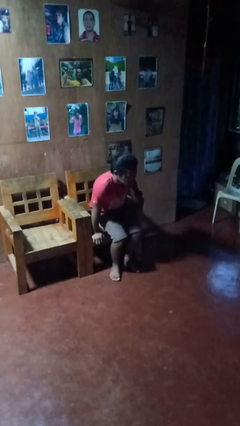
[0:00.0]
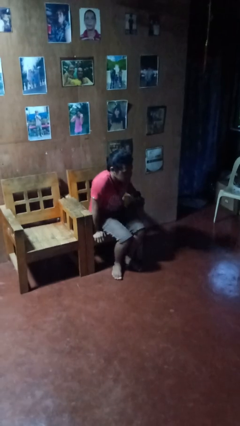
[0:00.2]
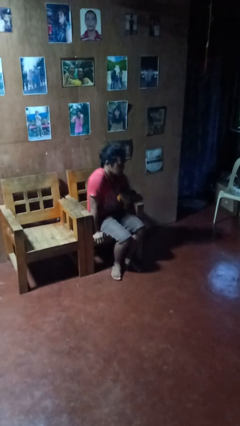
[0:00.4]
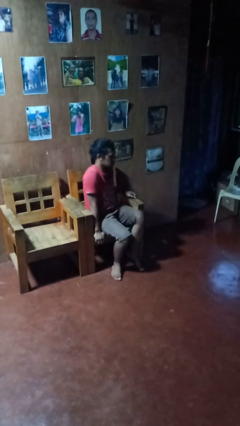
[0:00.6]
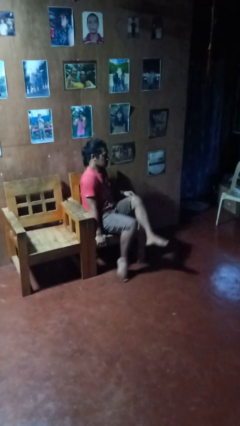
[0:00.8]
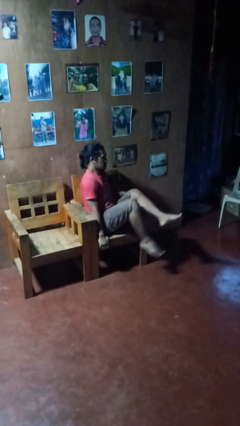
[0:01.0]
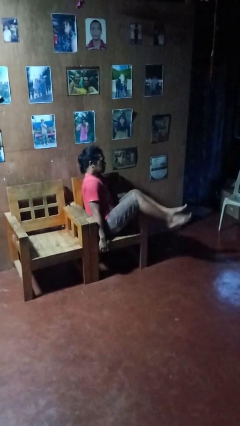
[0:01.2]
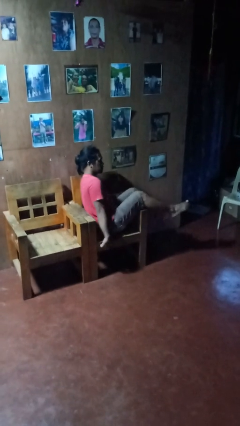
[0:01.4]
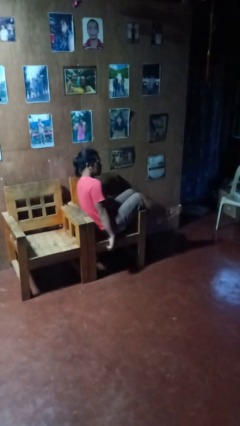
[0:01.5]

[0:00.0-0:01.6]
person sits down

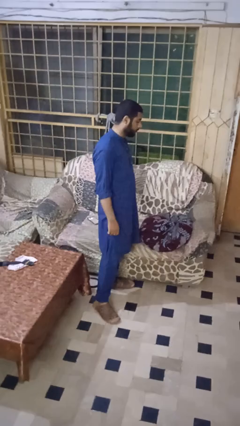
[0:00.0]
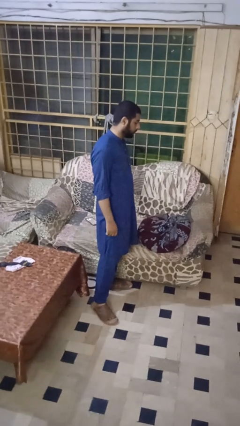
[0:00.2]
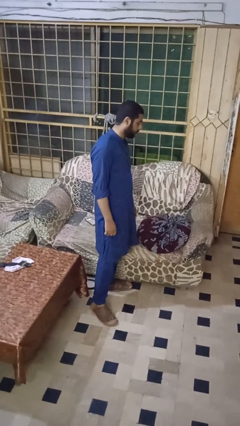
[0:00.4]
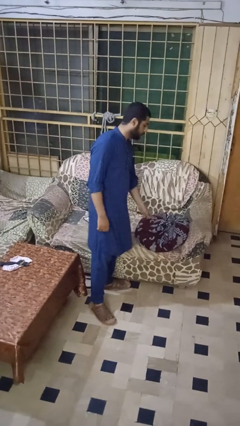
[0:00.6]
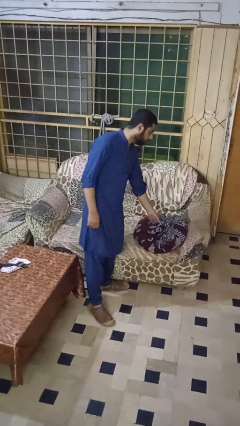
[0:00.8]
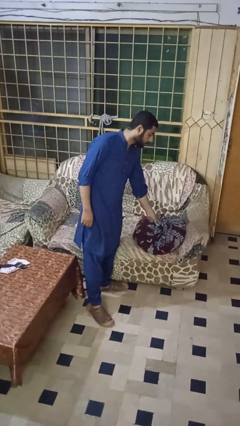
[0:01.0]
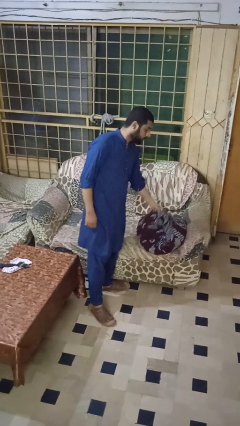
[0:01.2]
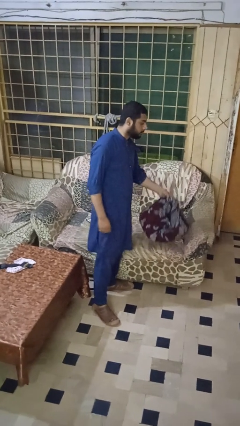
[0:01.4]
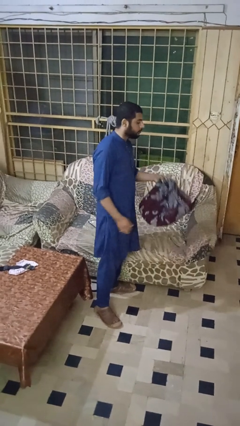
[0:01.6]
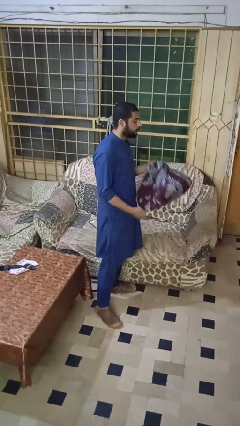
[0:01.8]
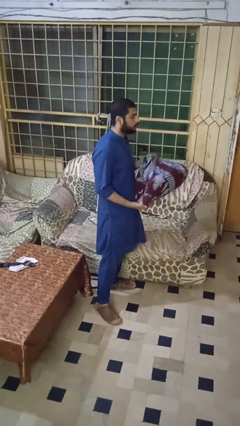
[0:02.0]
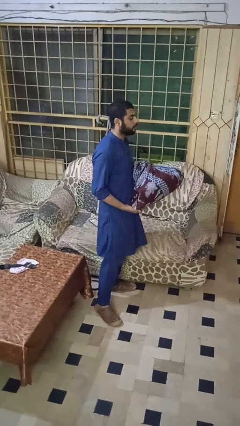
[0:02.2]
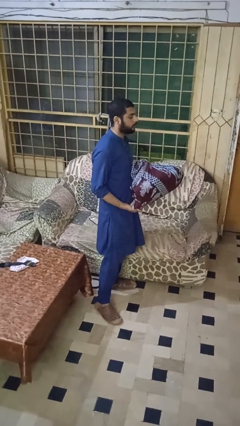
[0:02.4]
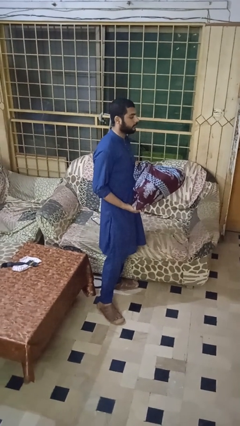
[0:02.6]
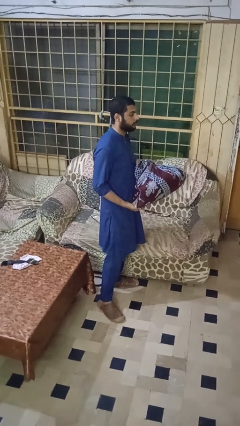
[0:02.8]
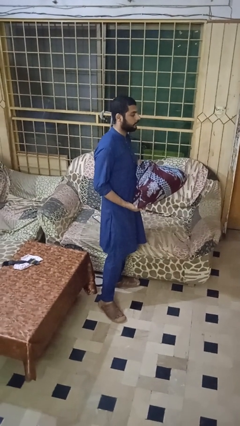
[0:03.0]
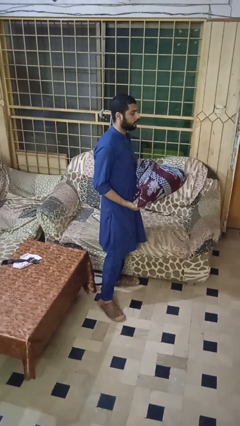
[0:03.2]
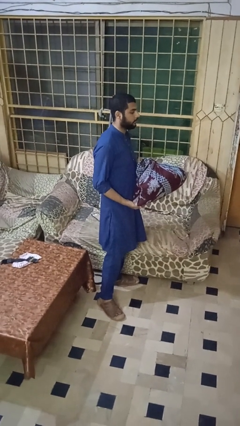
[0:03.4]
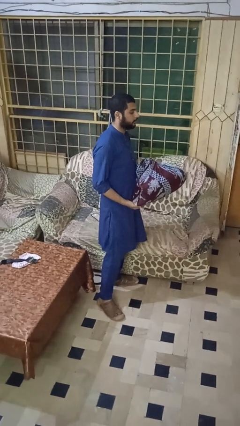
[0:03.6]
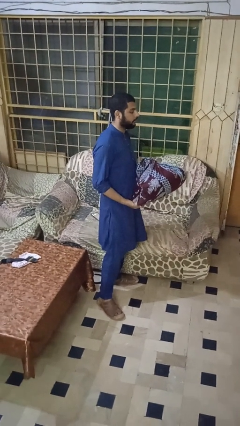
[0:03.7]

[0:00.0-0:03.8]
person picks up object from couch

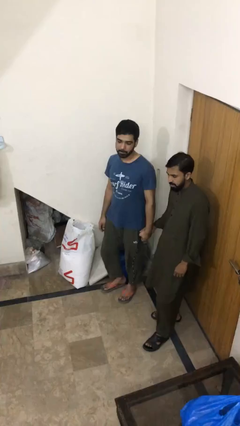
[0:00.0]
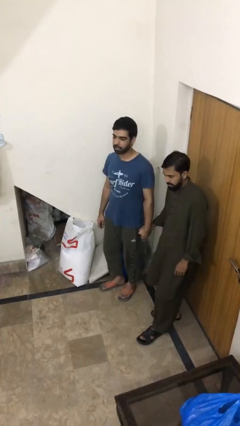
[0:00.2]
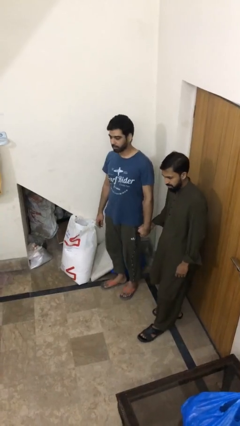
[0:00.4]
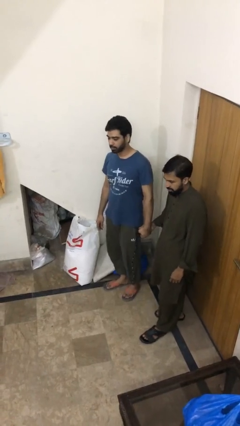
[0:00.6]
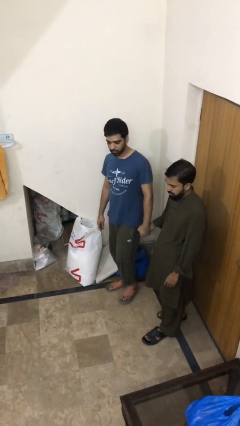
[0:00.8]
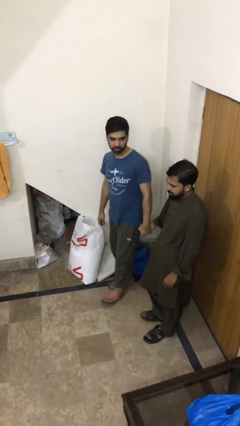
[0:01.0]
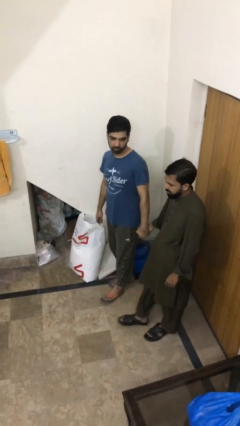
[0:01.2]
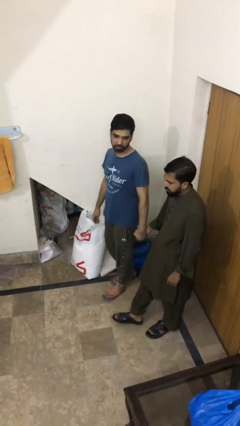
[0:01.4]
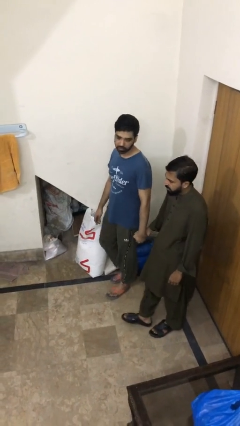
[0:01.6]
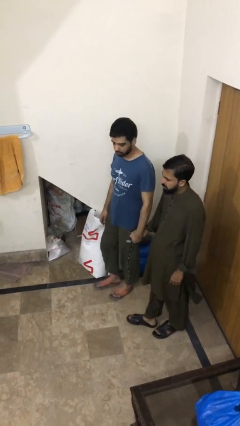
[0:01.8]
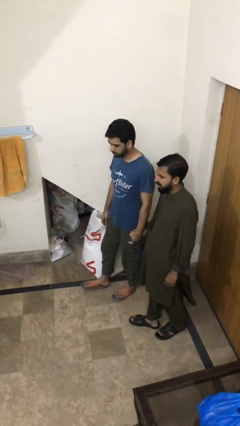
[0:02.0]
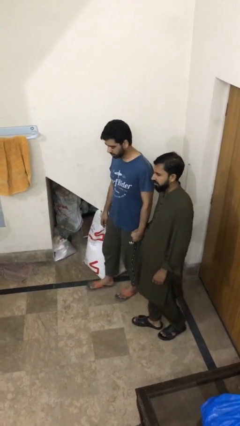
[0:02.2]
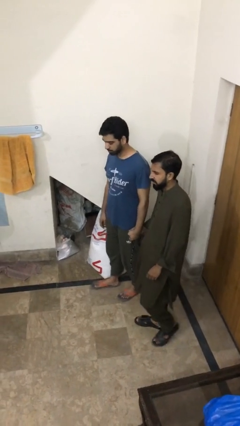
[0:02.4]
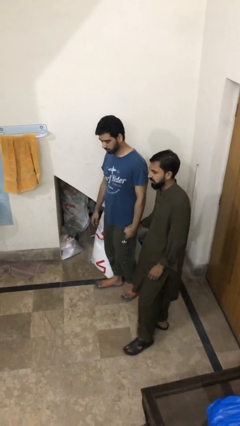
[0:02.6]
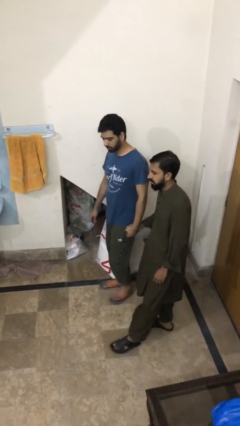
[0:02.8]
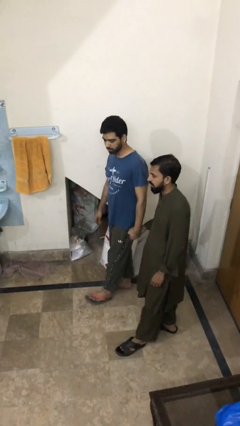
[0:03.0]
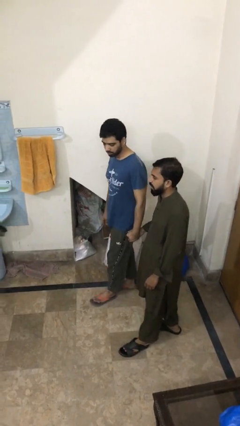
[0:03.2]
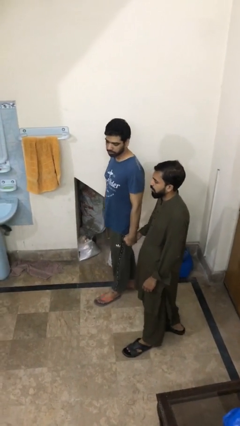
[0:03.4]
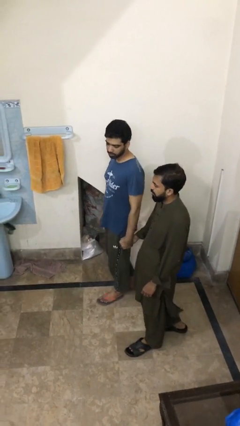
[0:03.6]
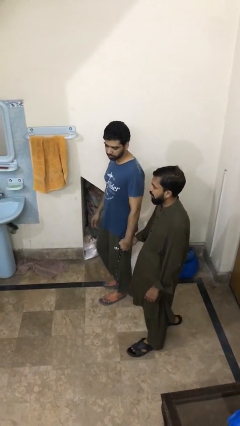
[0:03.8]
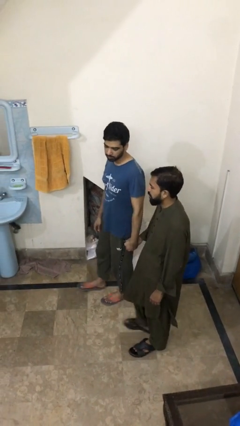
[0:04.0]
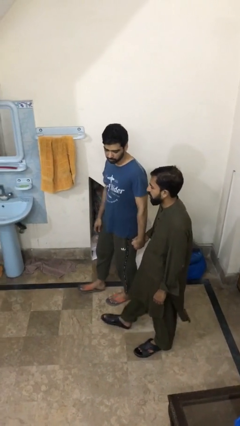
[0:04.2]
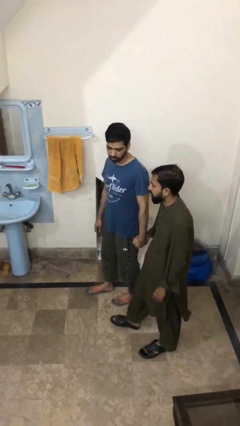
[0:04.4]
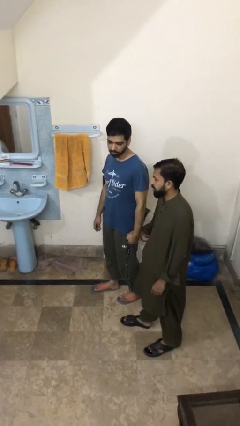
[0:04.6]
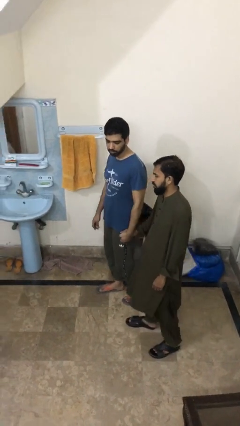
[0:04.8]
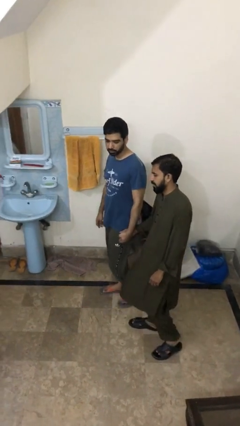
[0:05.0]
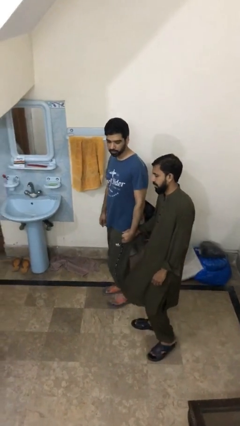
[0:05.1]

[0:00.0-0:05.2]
person holds hand

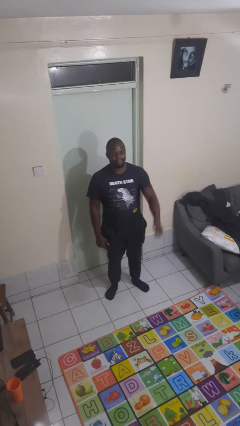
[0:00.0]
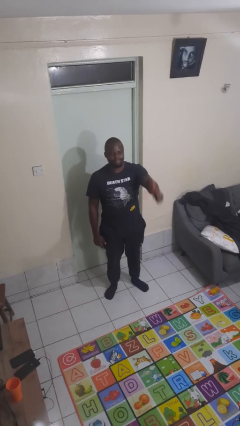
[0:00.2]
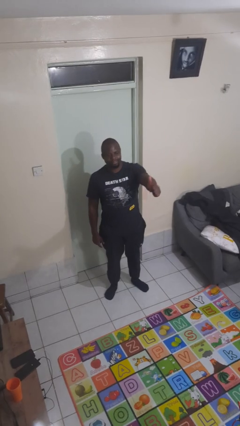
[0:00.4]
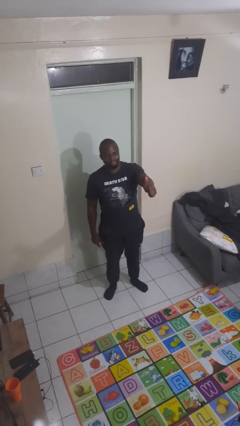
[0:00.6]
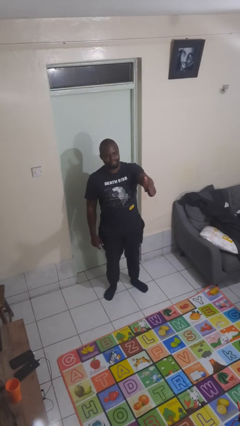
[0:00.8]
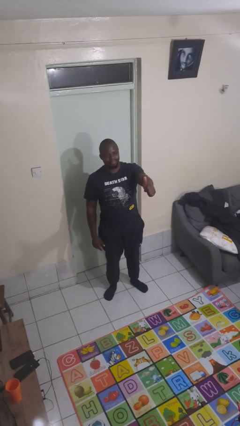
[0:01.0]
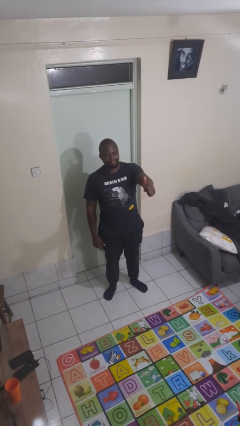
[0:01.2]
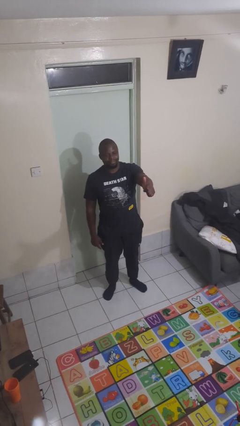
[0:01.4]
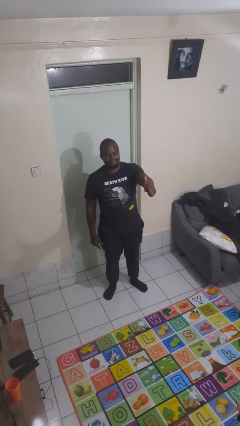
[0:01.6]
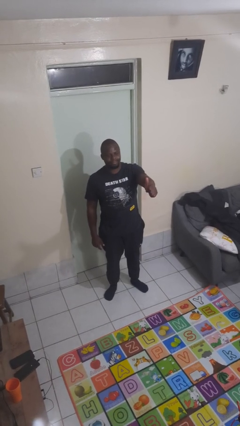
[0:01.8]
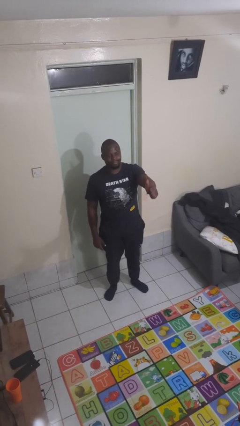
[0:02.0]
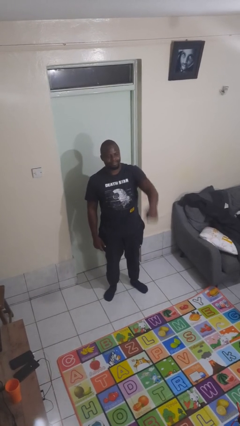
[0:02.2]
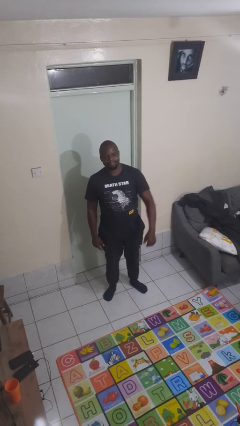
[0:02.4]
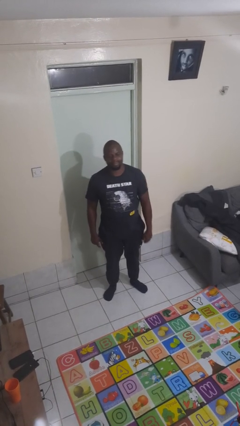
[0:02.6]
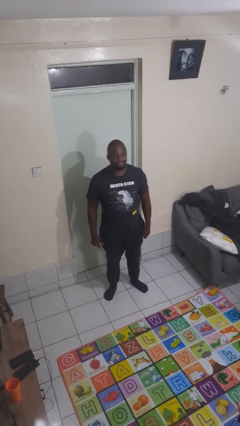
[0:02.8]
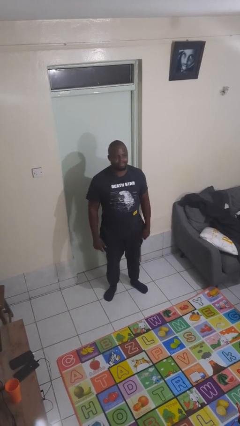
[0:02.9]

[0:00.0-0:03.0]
person gestures thumbs up

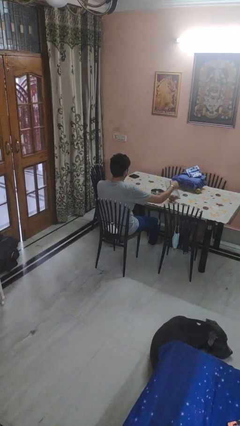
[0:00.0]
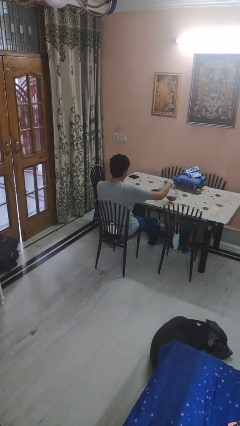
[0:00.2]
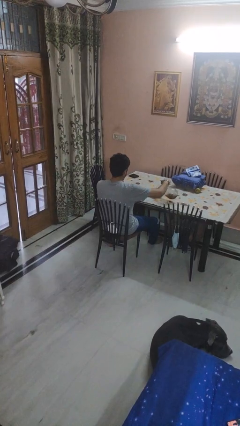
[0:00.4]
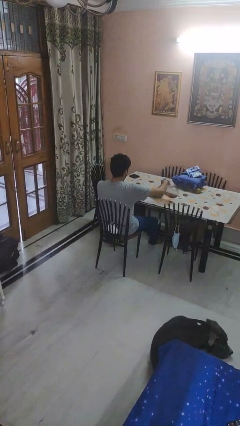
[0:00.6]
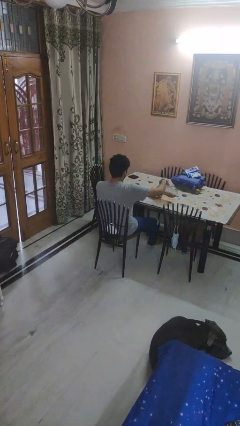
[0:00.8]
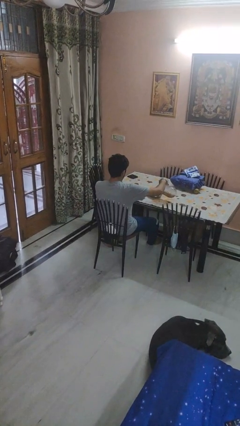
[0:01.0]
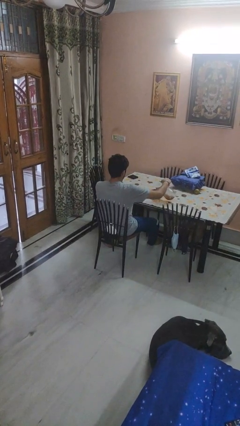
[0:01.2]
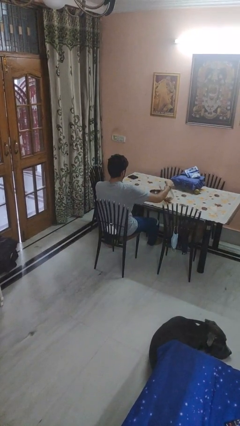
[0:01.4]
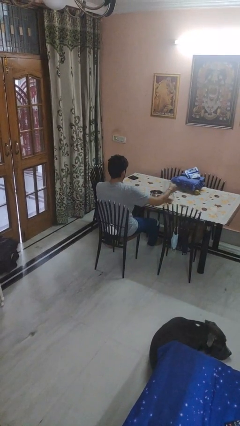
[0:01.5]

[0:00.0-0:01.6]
person pours into bowl

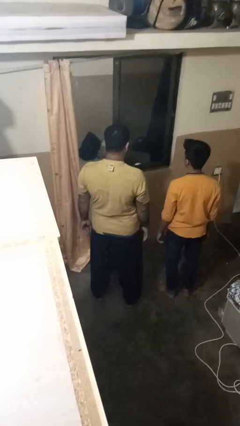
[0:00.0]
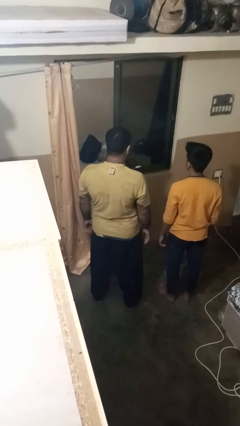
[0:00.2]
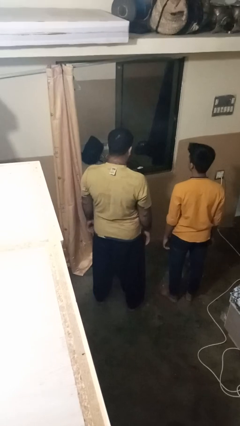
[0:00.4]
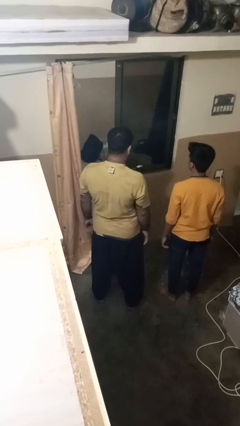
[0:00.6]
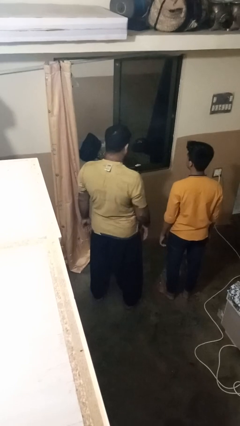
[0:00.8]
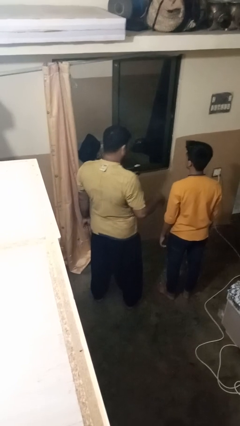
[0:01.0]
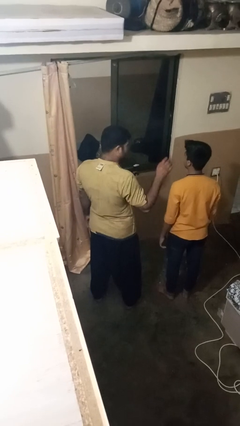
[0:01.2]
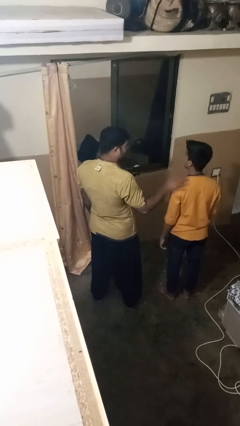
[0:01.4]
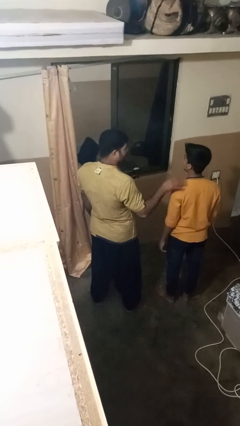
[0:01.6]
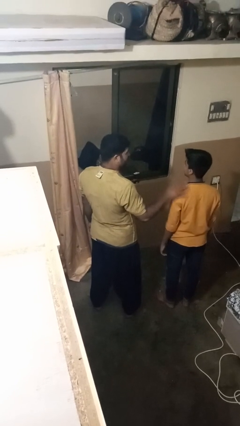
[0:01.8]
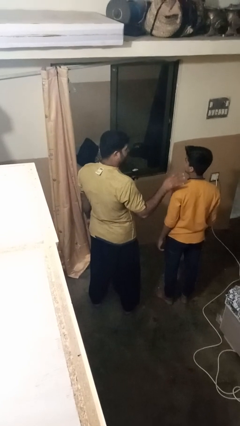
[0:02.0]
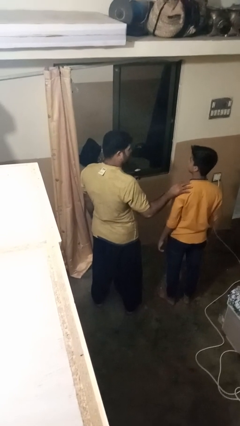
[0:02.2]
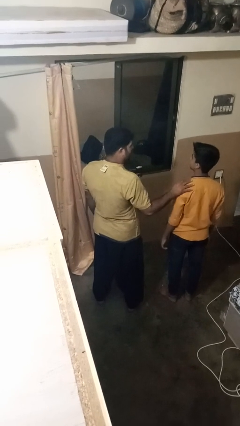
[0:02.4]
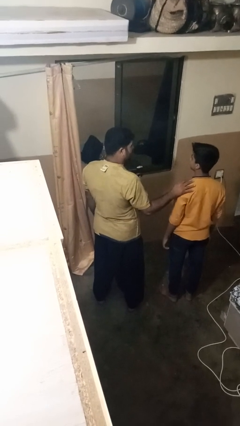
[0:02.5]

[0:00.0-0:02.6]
person pounds shoulders of person
